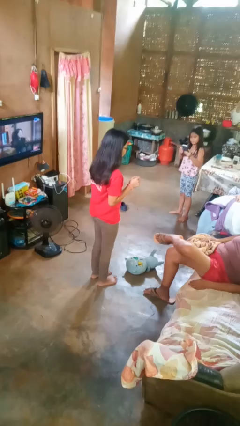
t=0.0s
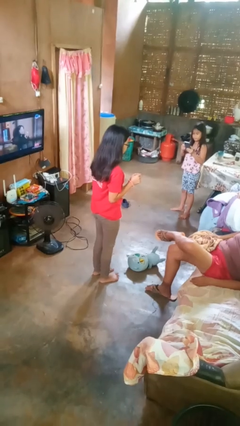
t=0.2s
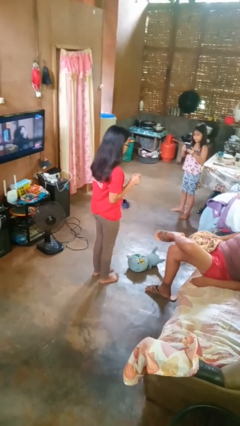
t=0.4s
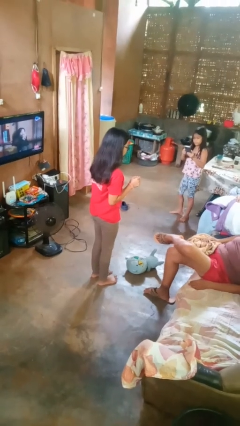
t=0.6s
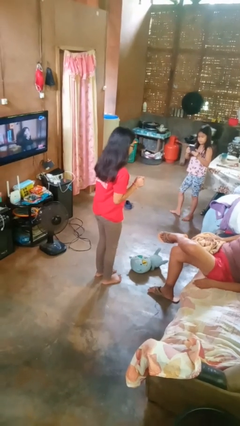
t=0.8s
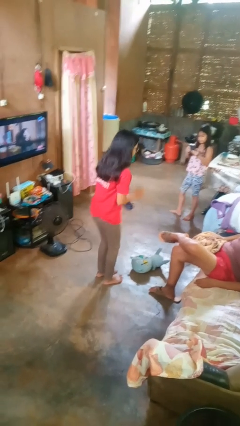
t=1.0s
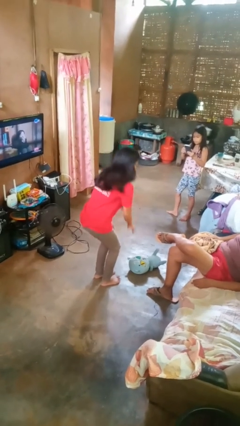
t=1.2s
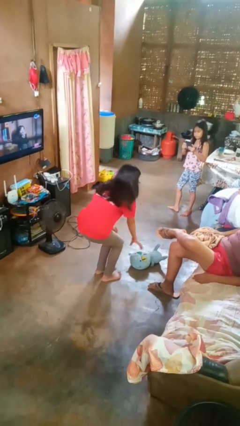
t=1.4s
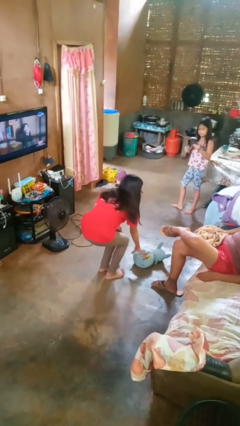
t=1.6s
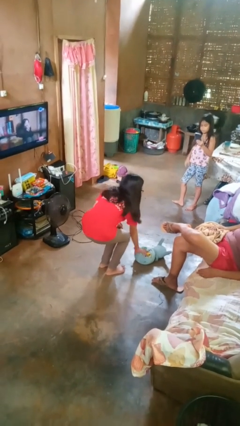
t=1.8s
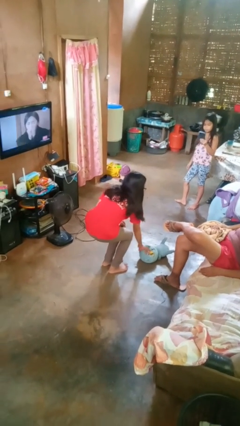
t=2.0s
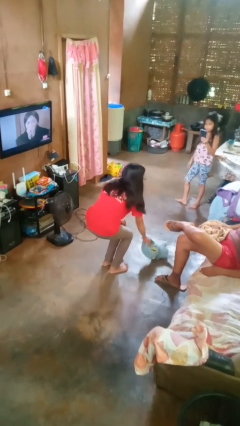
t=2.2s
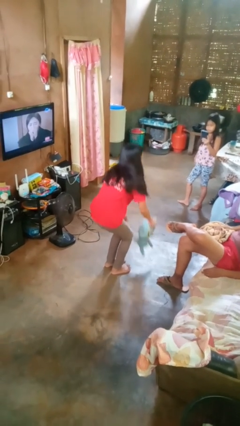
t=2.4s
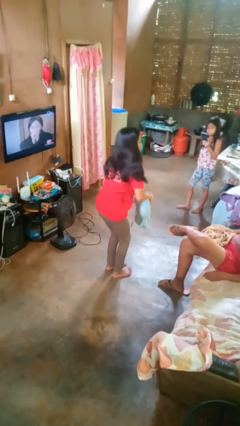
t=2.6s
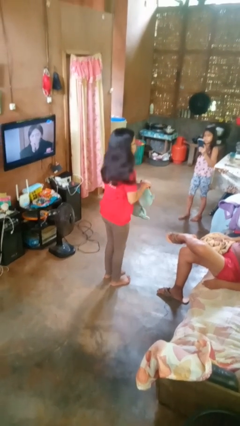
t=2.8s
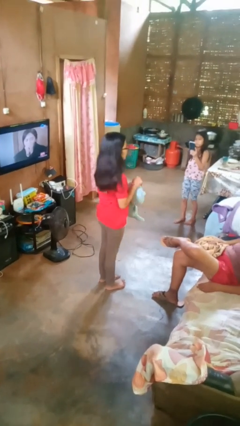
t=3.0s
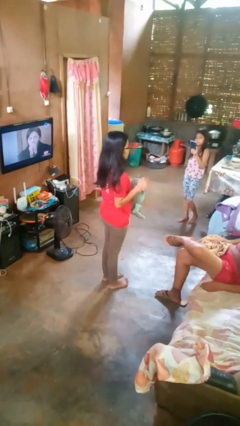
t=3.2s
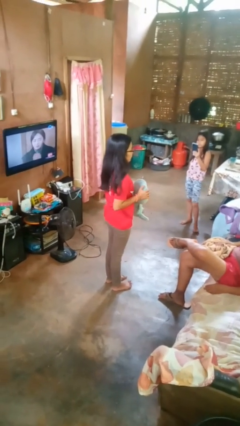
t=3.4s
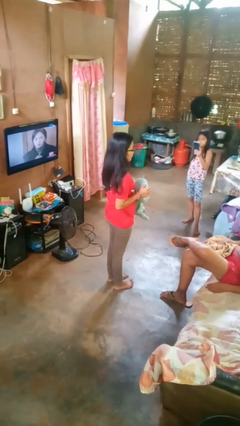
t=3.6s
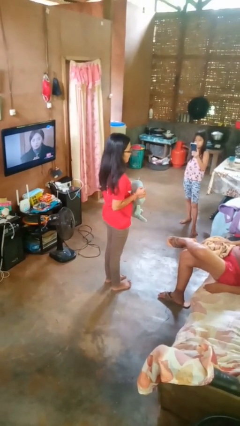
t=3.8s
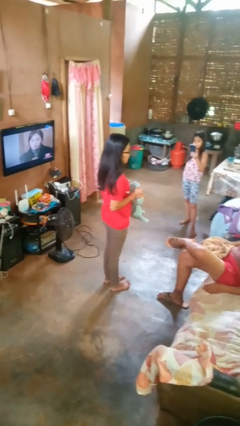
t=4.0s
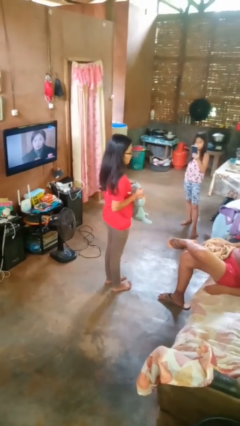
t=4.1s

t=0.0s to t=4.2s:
person picks up object from floor

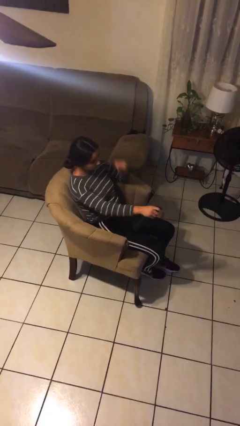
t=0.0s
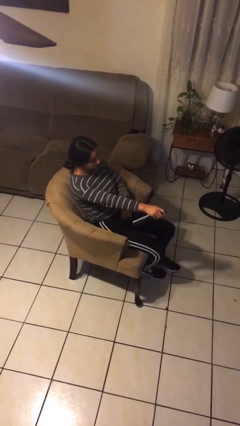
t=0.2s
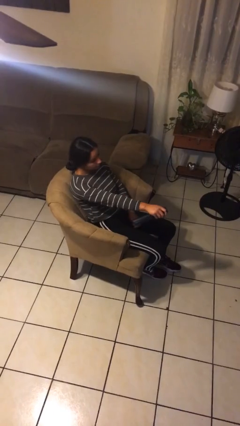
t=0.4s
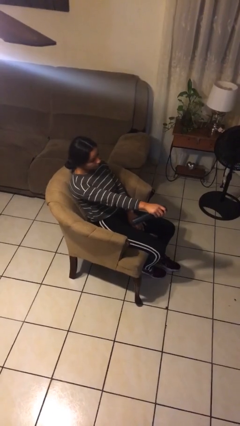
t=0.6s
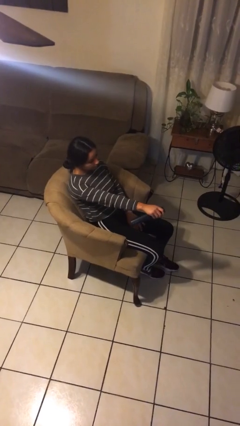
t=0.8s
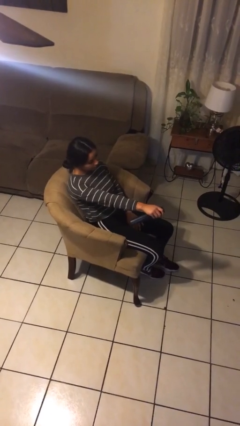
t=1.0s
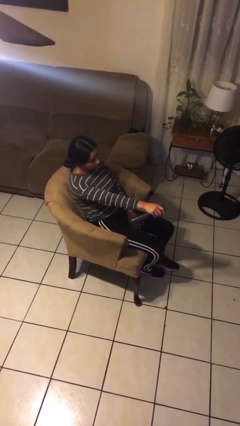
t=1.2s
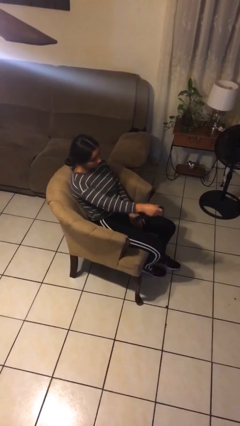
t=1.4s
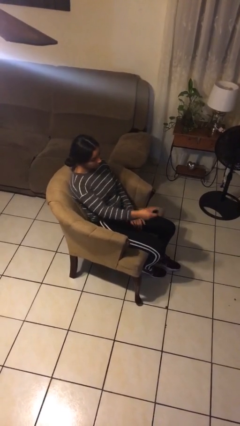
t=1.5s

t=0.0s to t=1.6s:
person uses television remote

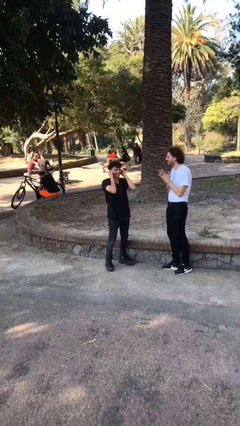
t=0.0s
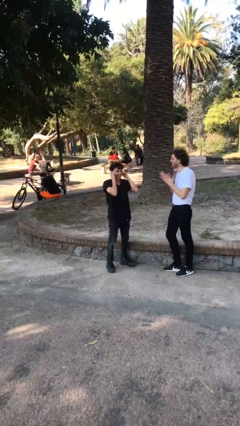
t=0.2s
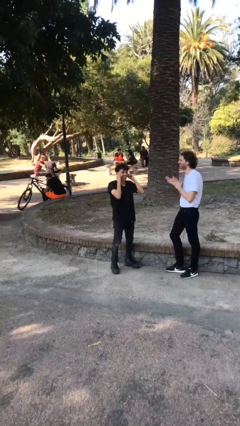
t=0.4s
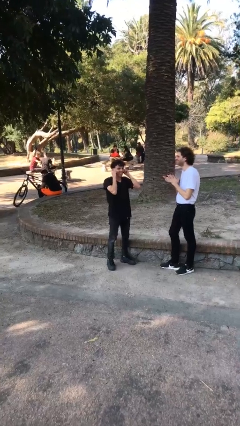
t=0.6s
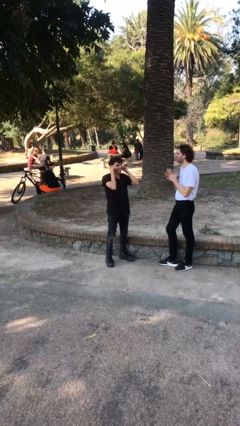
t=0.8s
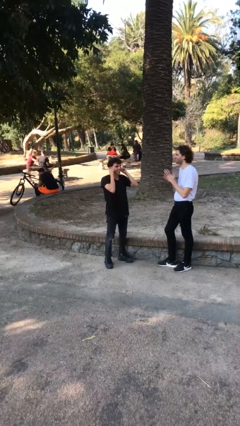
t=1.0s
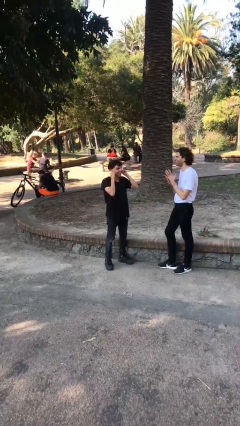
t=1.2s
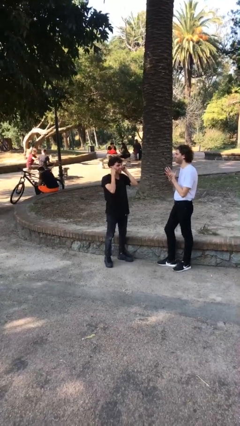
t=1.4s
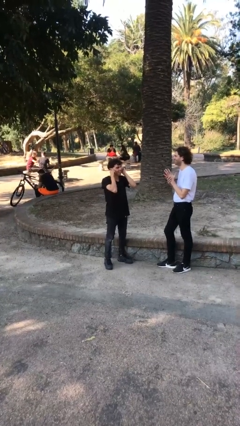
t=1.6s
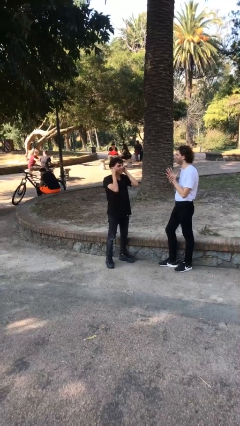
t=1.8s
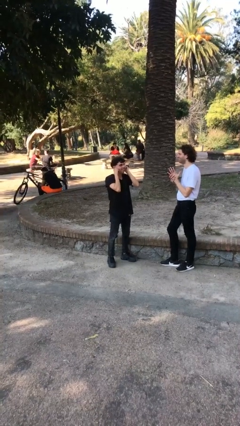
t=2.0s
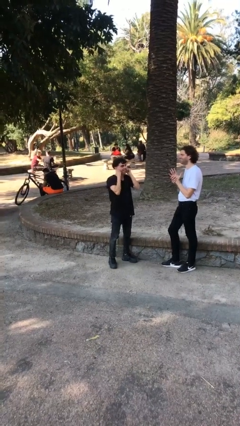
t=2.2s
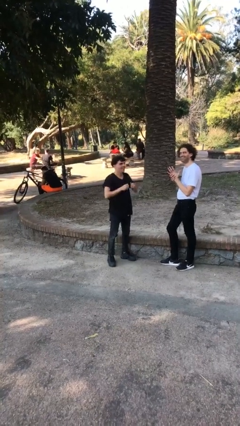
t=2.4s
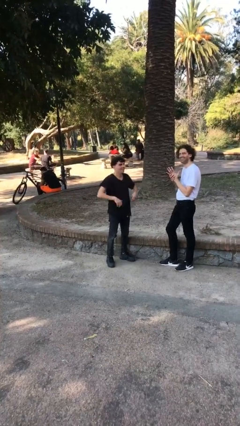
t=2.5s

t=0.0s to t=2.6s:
person laughs with person

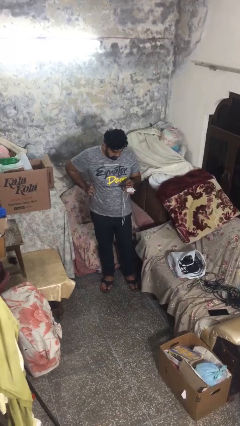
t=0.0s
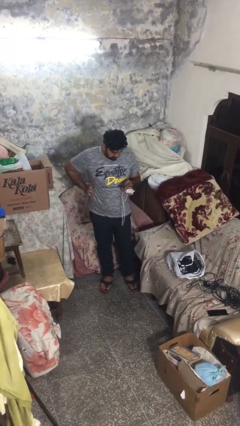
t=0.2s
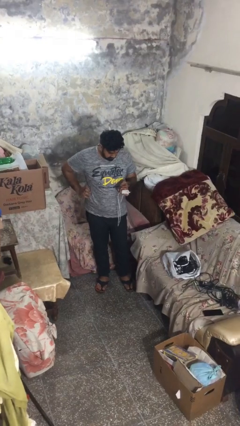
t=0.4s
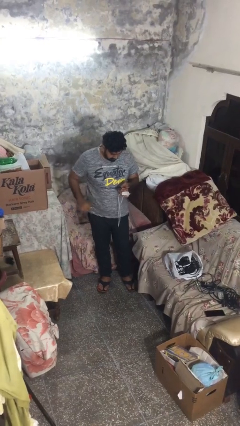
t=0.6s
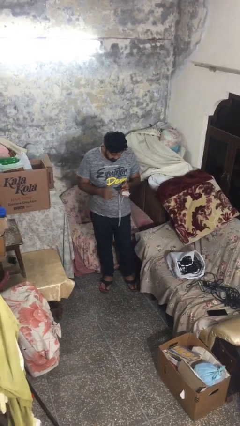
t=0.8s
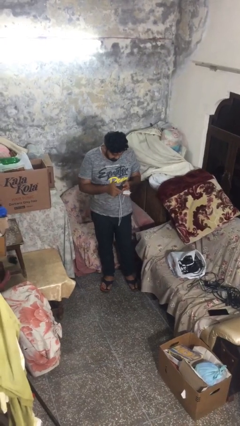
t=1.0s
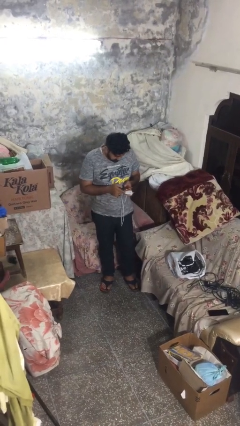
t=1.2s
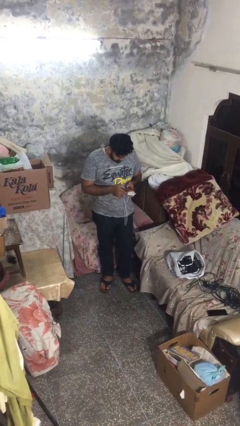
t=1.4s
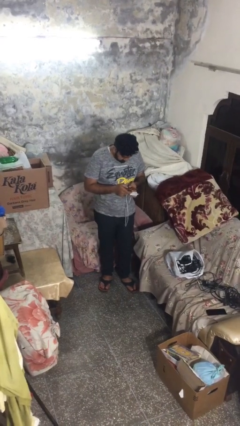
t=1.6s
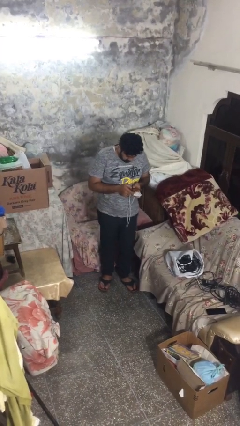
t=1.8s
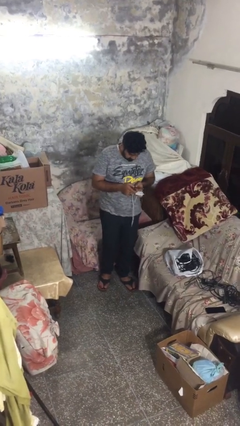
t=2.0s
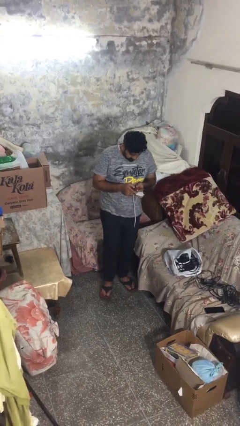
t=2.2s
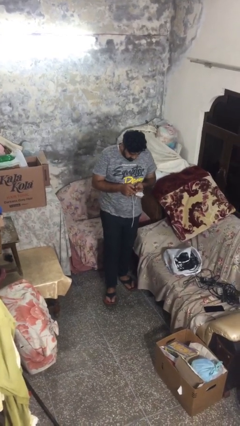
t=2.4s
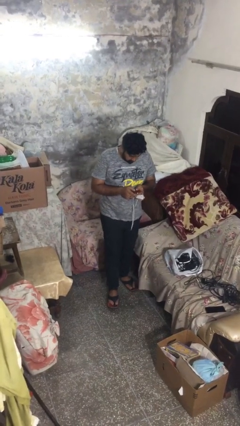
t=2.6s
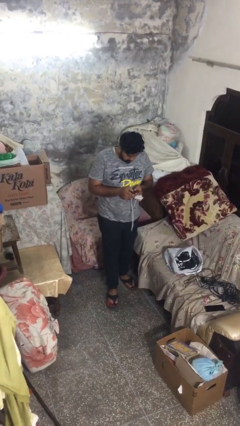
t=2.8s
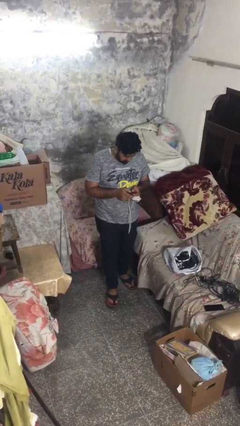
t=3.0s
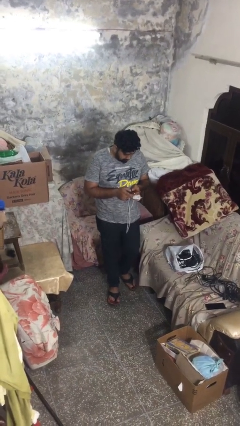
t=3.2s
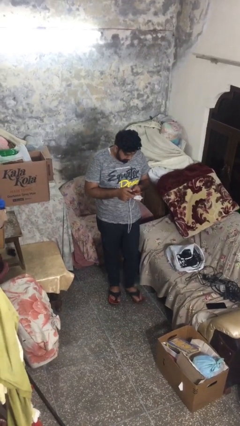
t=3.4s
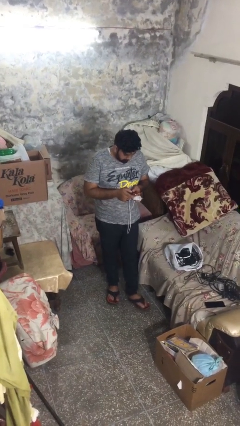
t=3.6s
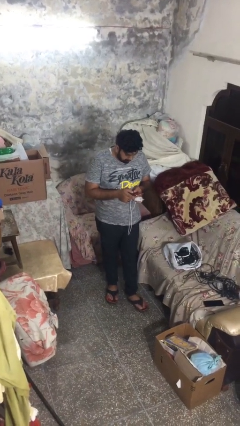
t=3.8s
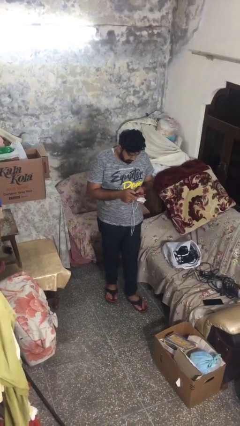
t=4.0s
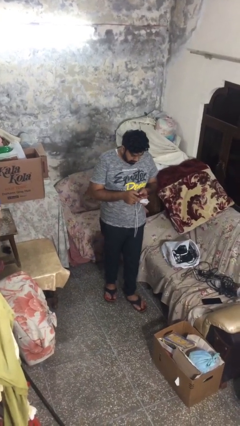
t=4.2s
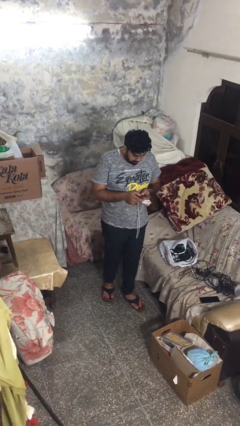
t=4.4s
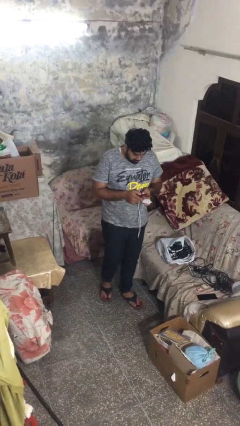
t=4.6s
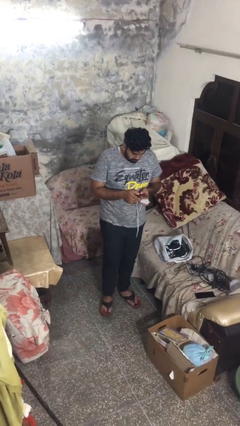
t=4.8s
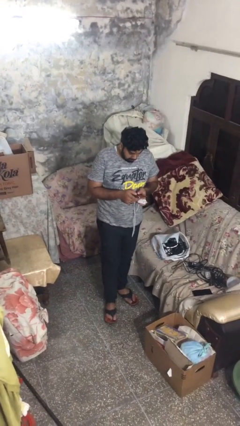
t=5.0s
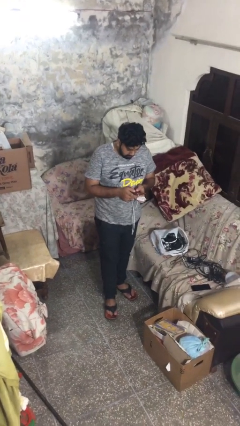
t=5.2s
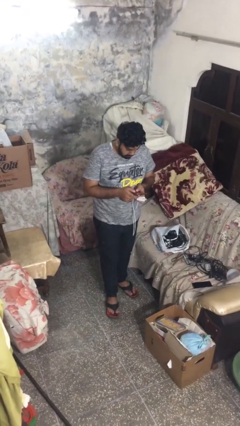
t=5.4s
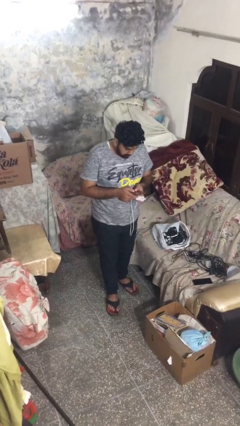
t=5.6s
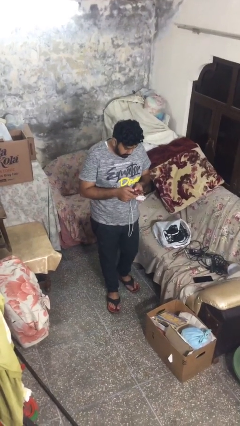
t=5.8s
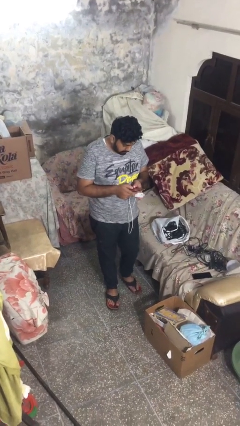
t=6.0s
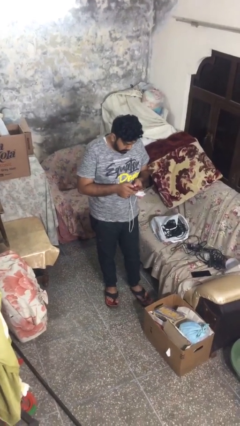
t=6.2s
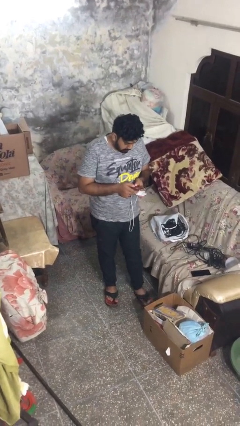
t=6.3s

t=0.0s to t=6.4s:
person texts on phone

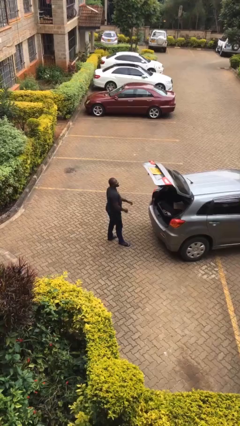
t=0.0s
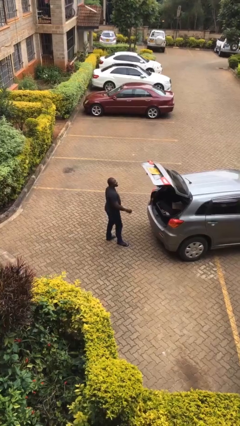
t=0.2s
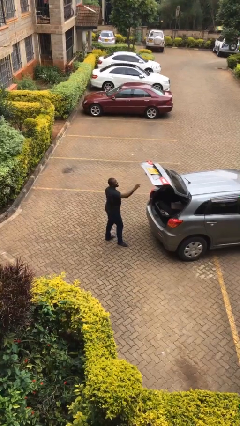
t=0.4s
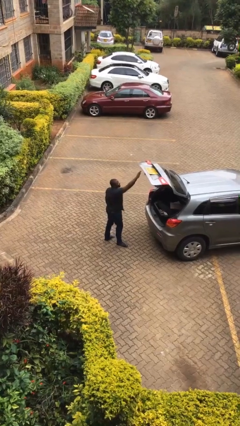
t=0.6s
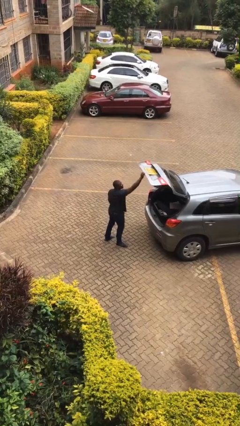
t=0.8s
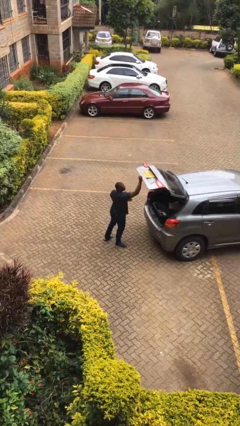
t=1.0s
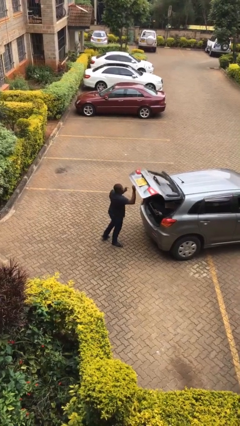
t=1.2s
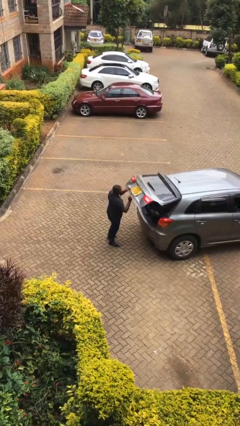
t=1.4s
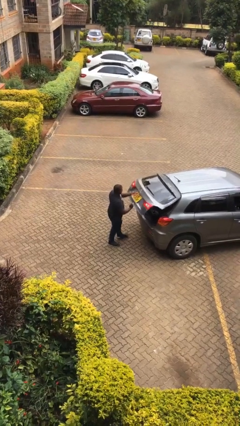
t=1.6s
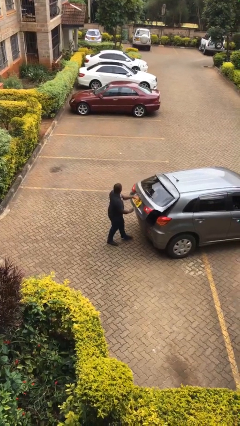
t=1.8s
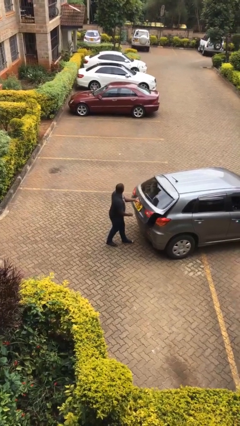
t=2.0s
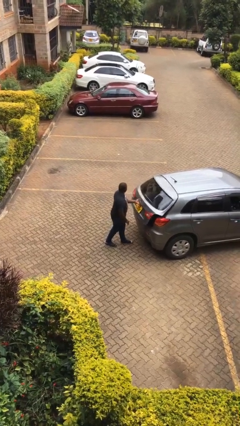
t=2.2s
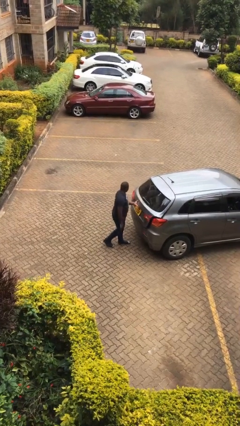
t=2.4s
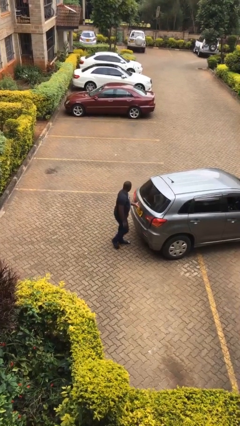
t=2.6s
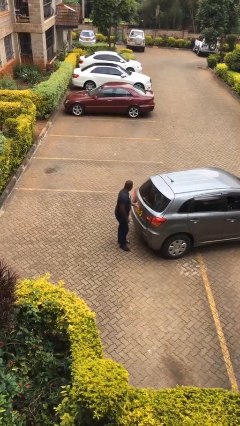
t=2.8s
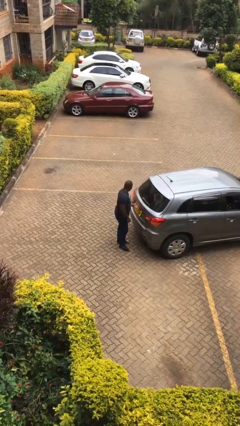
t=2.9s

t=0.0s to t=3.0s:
person closes car trunk
